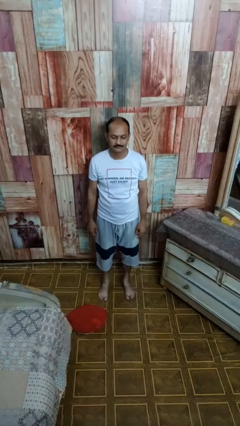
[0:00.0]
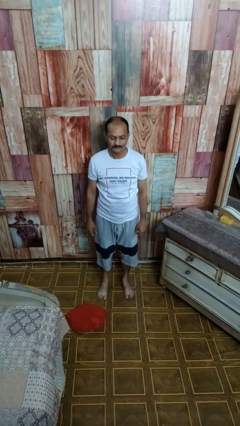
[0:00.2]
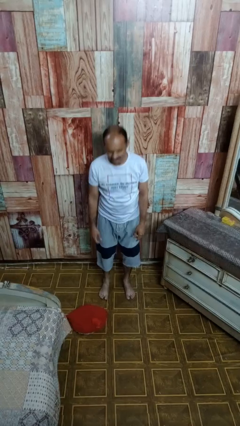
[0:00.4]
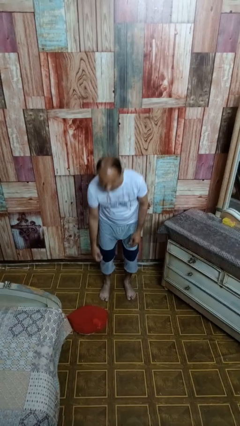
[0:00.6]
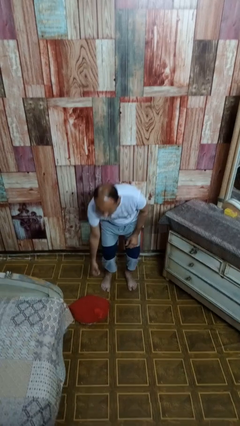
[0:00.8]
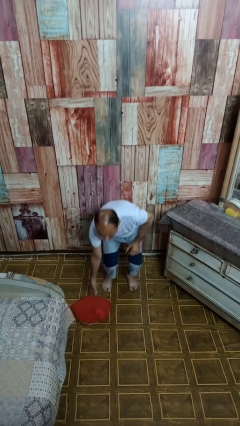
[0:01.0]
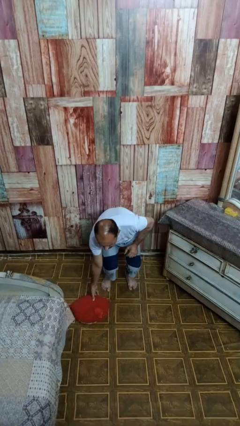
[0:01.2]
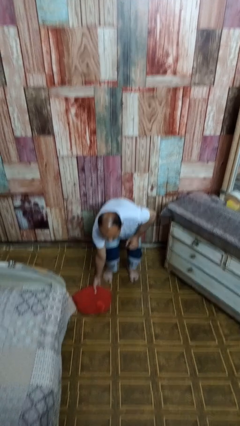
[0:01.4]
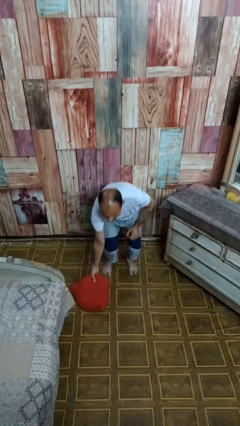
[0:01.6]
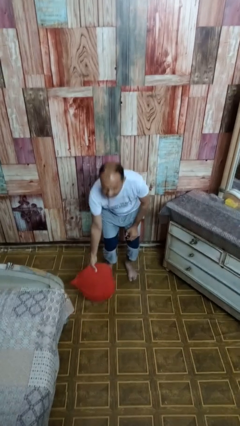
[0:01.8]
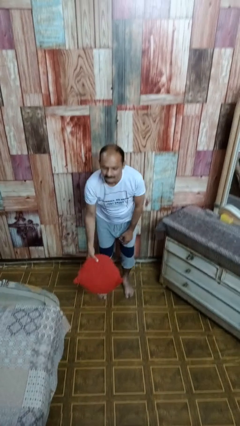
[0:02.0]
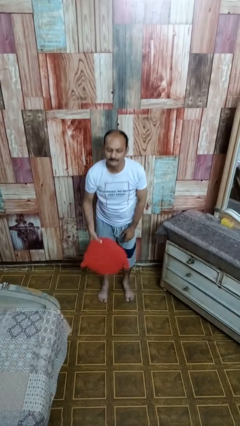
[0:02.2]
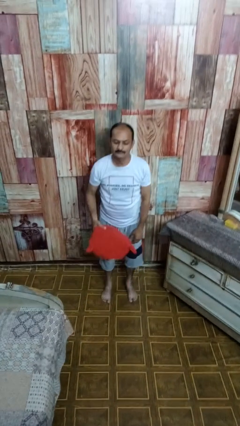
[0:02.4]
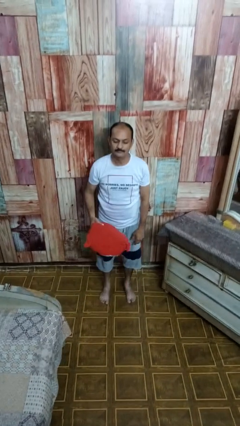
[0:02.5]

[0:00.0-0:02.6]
person picks up object from floor

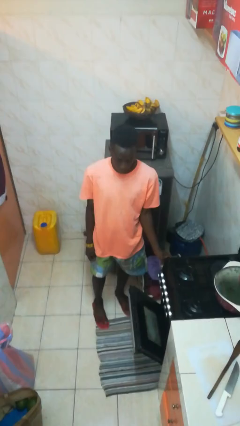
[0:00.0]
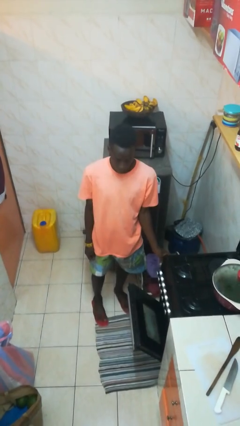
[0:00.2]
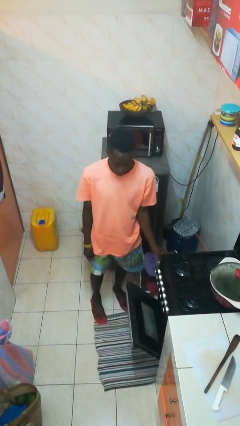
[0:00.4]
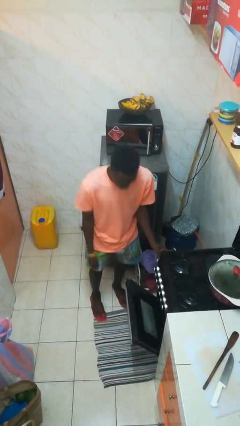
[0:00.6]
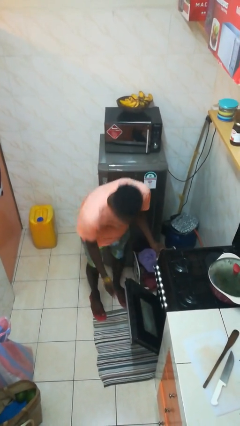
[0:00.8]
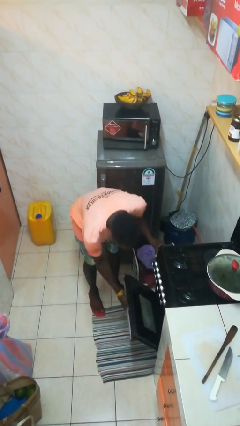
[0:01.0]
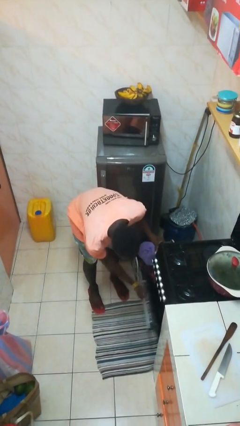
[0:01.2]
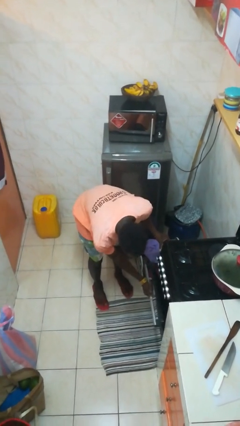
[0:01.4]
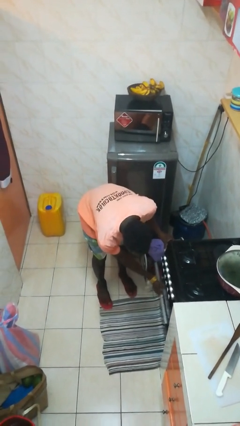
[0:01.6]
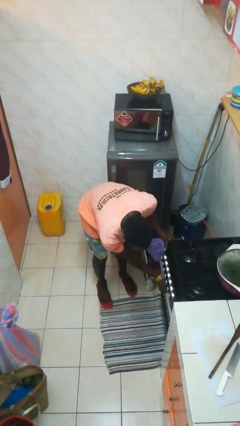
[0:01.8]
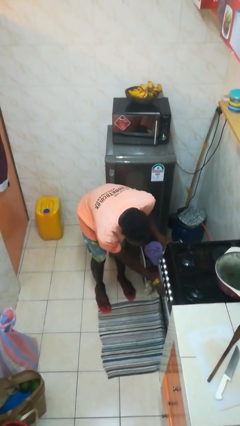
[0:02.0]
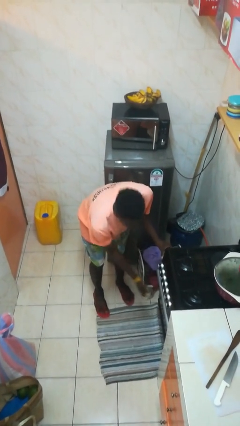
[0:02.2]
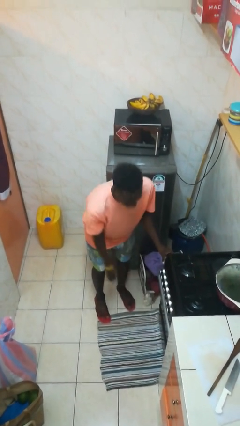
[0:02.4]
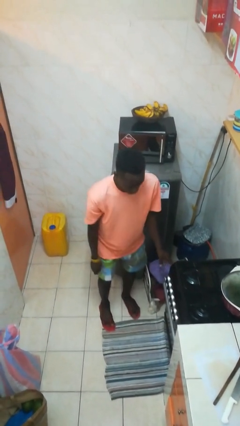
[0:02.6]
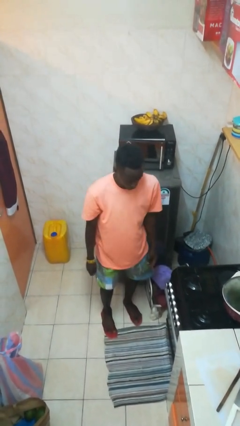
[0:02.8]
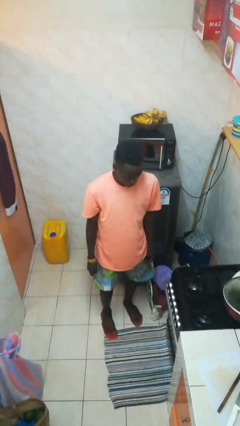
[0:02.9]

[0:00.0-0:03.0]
person closes oven door

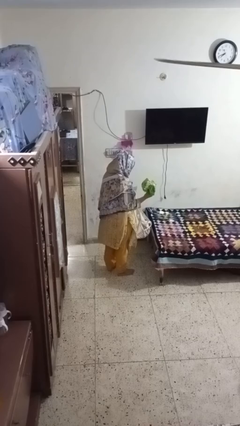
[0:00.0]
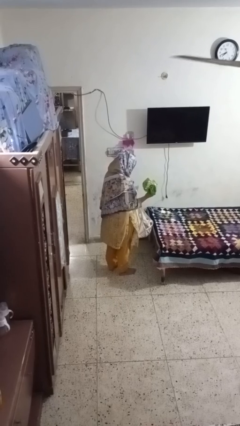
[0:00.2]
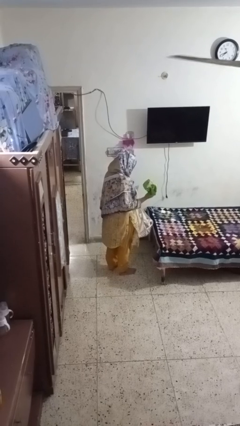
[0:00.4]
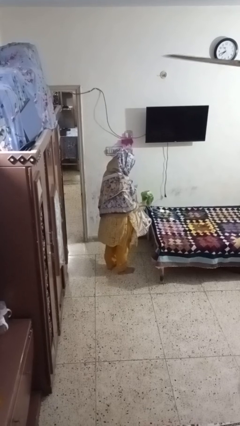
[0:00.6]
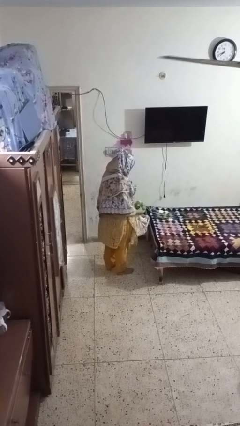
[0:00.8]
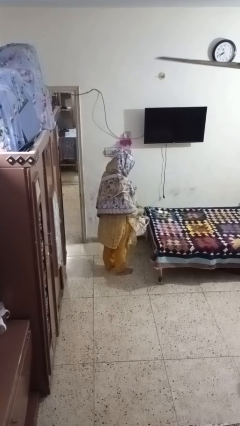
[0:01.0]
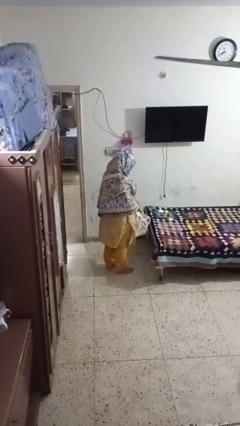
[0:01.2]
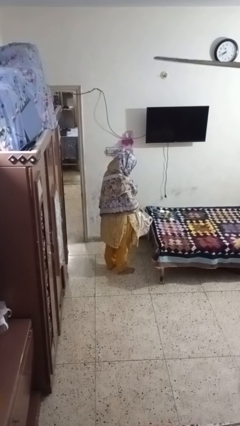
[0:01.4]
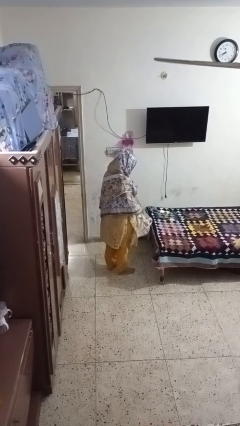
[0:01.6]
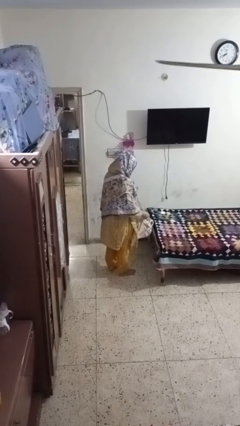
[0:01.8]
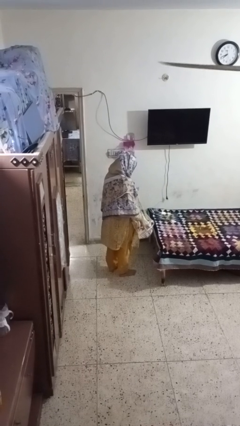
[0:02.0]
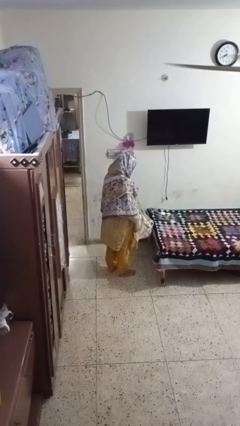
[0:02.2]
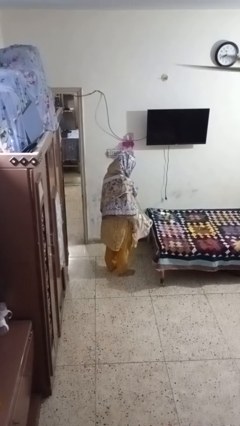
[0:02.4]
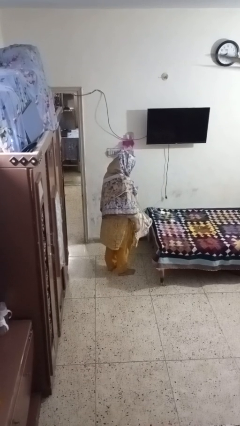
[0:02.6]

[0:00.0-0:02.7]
person puts object into bag

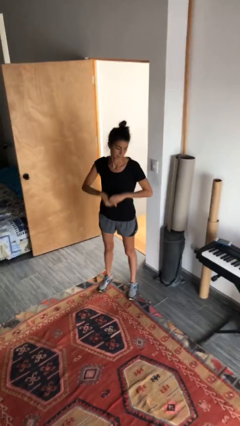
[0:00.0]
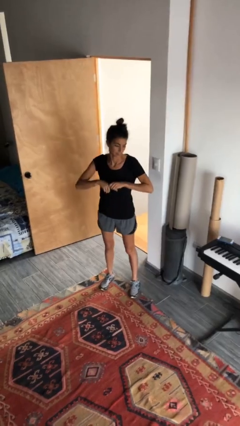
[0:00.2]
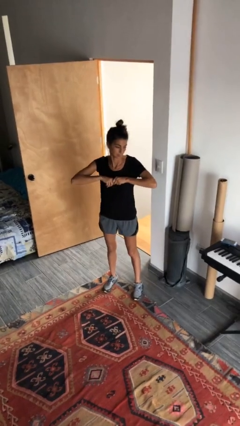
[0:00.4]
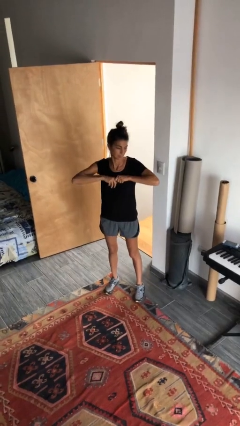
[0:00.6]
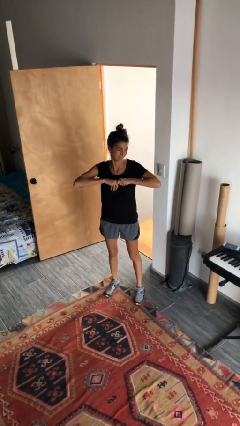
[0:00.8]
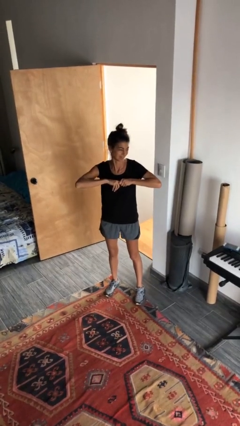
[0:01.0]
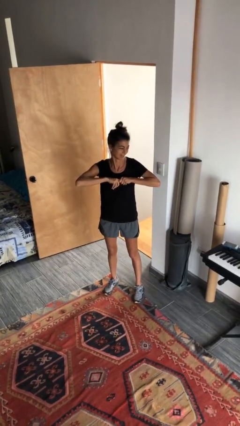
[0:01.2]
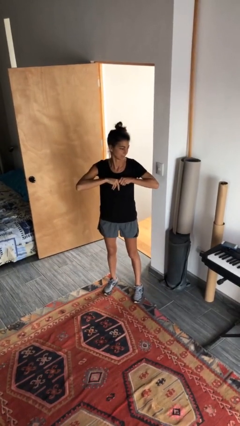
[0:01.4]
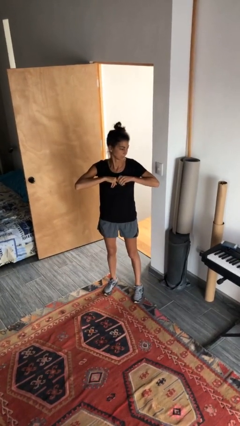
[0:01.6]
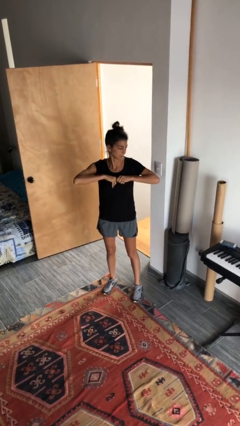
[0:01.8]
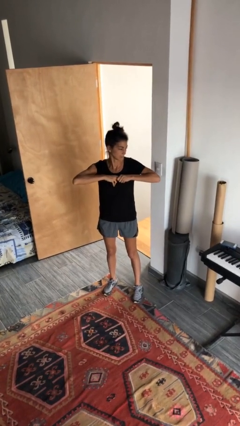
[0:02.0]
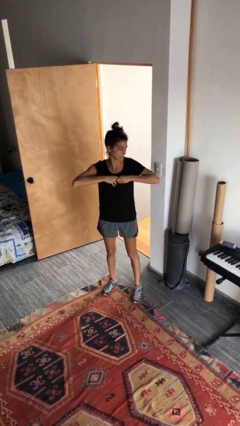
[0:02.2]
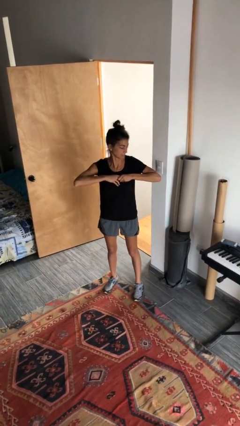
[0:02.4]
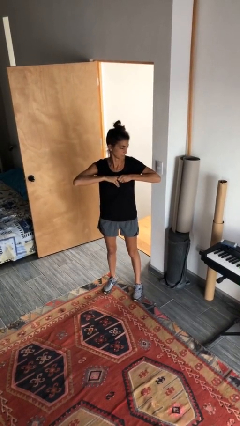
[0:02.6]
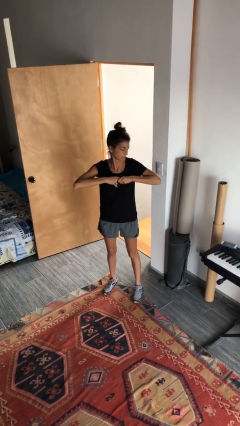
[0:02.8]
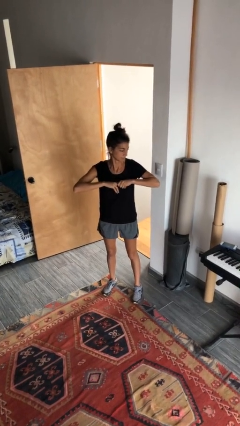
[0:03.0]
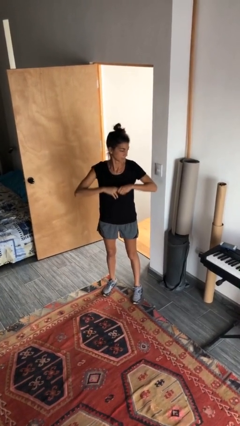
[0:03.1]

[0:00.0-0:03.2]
person cracks knuckles

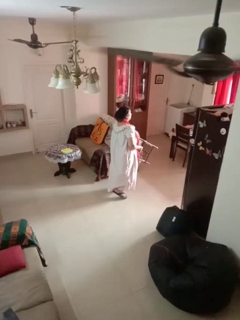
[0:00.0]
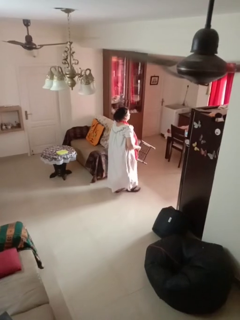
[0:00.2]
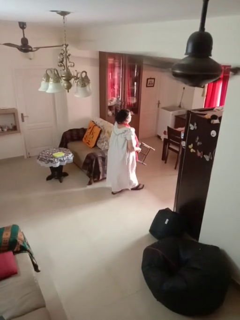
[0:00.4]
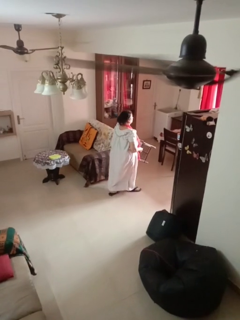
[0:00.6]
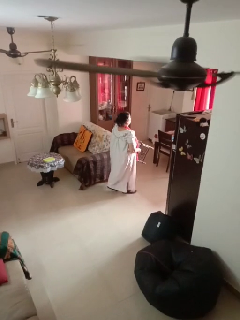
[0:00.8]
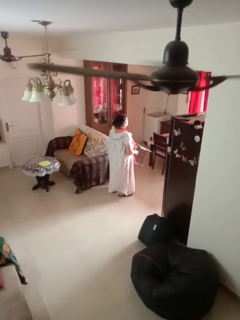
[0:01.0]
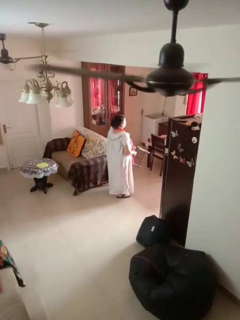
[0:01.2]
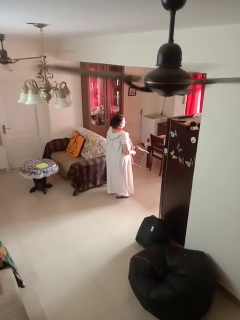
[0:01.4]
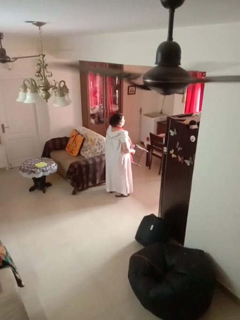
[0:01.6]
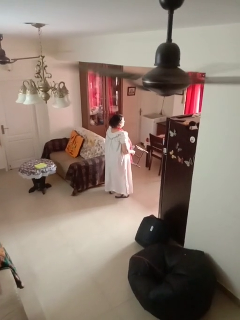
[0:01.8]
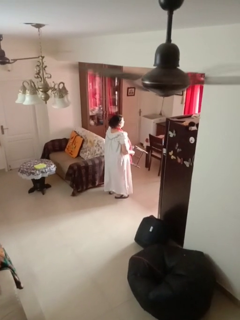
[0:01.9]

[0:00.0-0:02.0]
person carries furniture

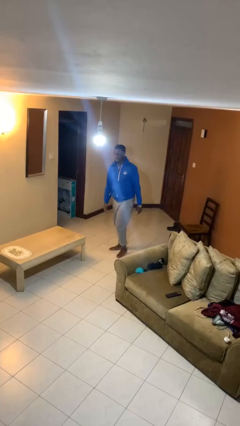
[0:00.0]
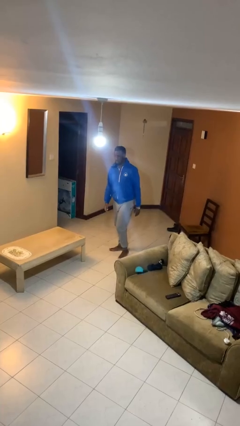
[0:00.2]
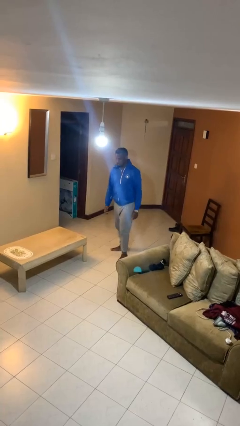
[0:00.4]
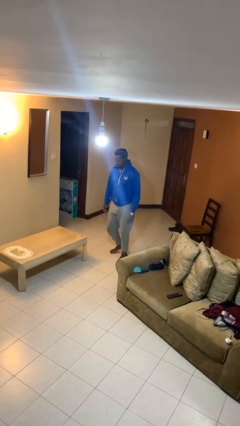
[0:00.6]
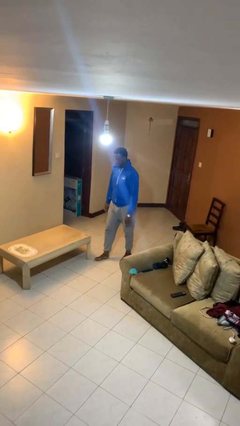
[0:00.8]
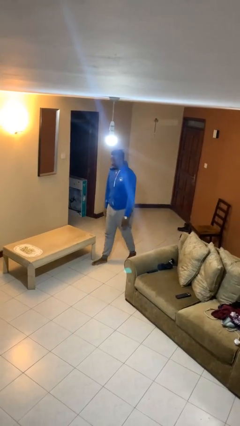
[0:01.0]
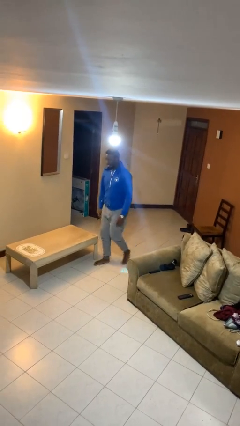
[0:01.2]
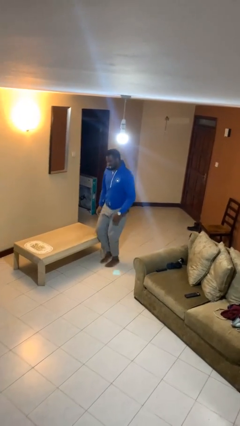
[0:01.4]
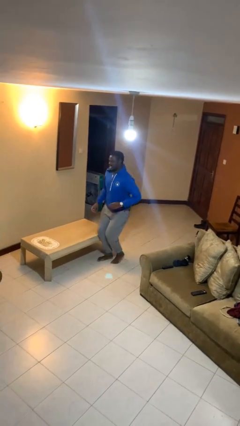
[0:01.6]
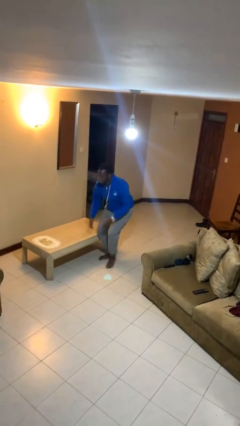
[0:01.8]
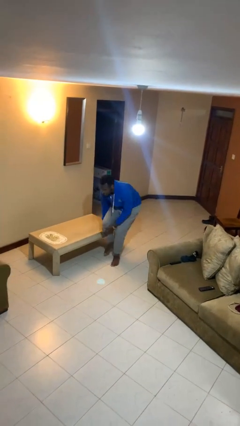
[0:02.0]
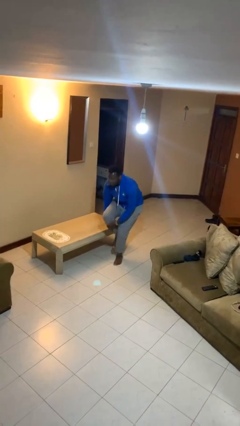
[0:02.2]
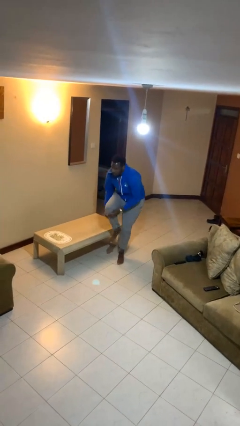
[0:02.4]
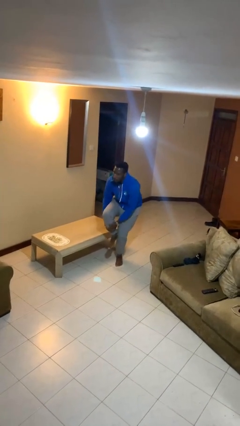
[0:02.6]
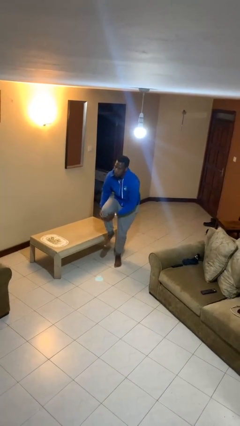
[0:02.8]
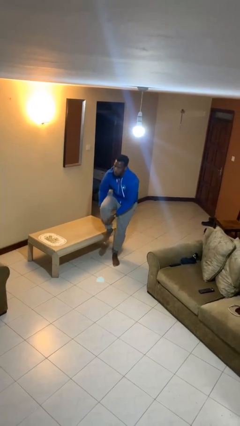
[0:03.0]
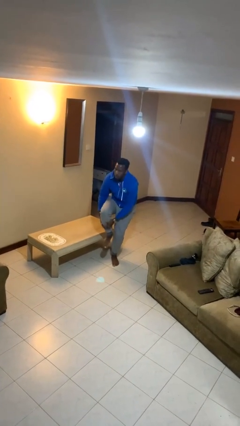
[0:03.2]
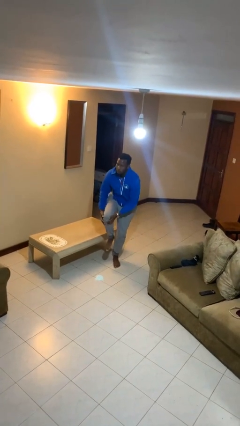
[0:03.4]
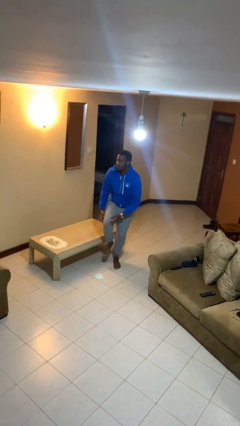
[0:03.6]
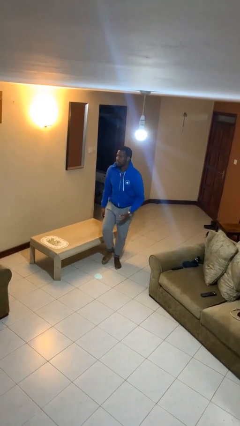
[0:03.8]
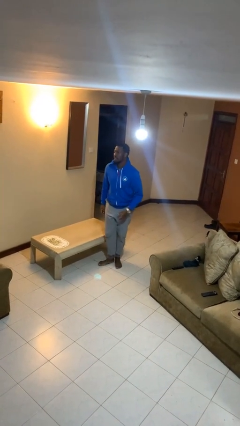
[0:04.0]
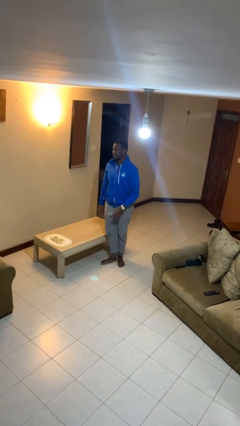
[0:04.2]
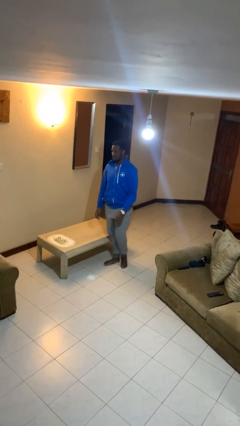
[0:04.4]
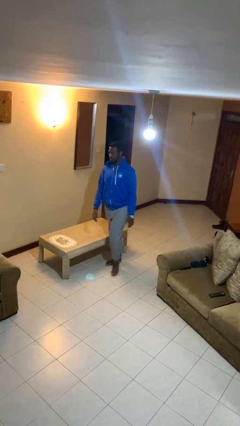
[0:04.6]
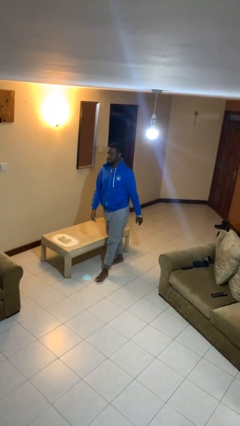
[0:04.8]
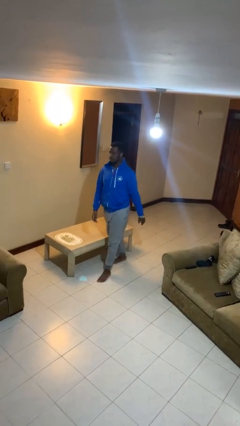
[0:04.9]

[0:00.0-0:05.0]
person bumps into table
